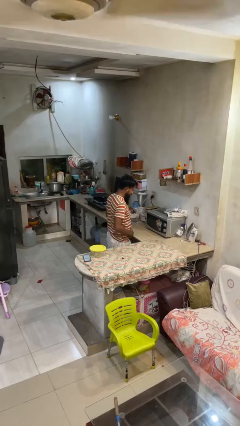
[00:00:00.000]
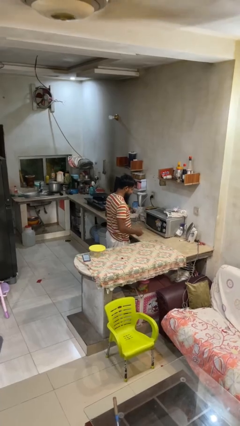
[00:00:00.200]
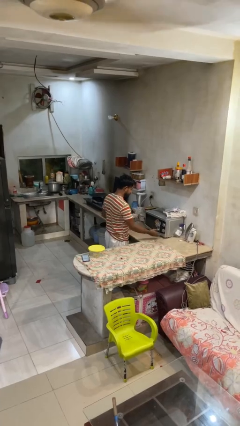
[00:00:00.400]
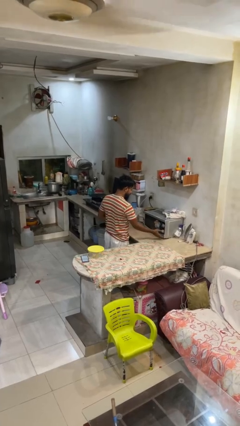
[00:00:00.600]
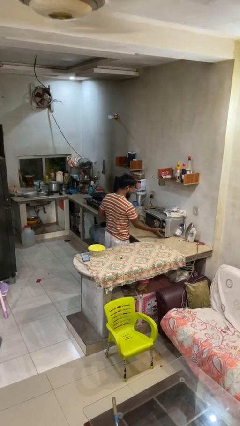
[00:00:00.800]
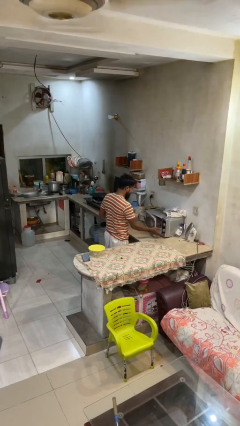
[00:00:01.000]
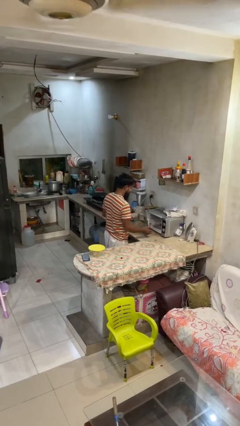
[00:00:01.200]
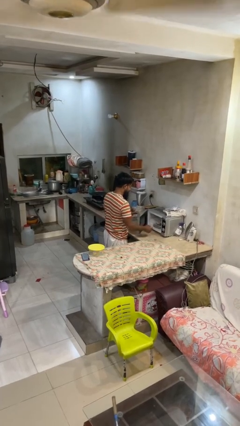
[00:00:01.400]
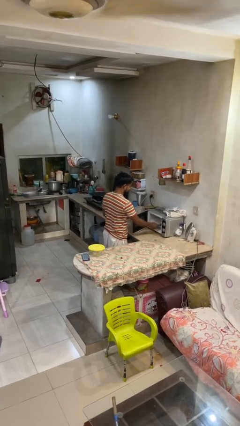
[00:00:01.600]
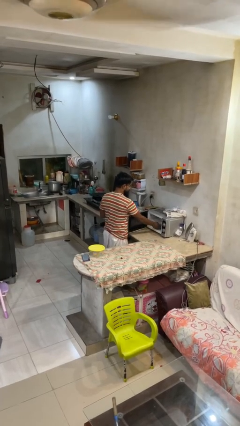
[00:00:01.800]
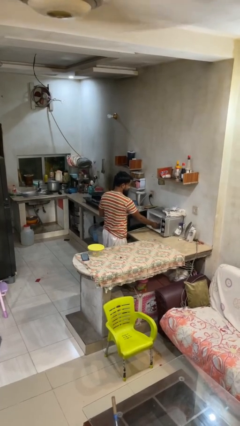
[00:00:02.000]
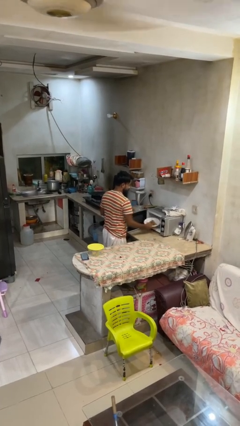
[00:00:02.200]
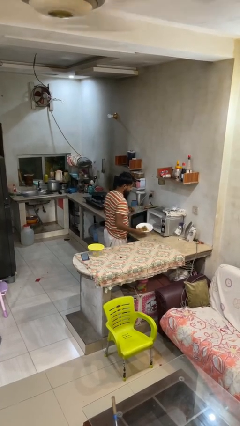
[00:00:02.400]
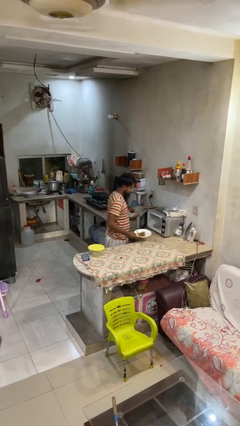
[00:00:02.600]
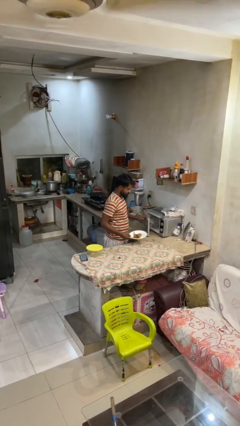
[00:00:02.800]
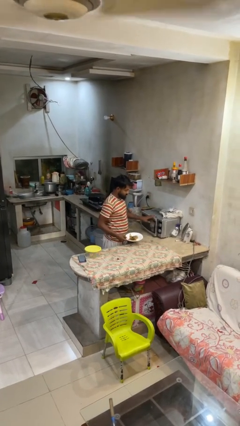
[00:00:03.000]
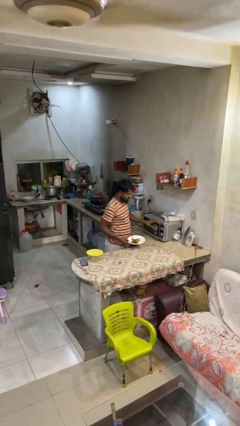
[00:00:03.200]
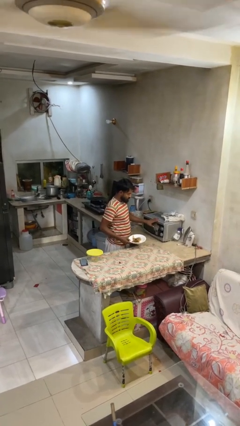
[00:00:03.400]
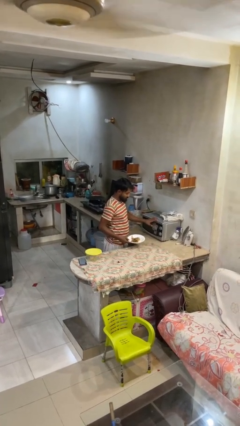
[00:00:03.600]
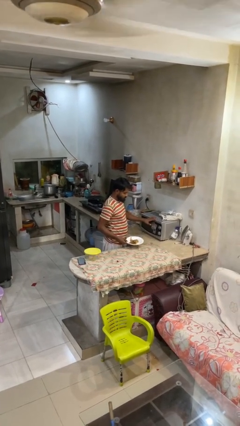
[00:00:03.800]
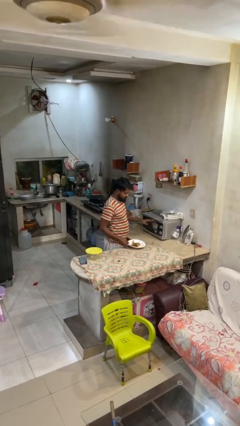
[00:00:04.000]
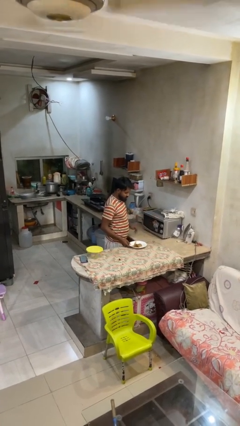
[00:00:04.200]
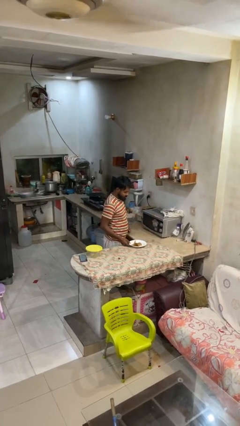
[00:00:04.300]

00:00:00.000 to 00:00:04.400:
person takes object from microwave

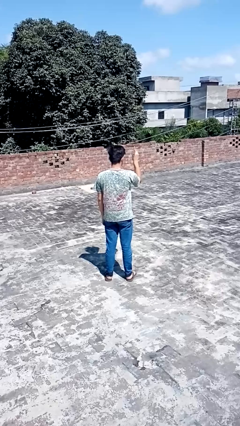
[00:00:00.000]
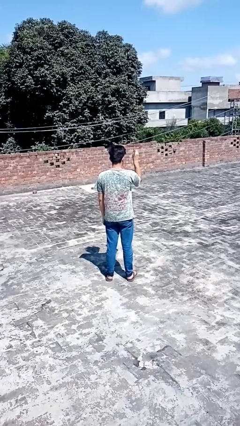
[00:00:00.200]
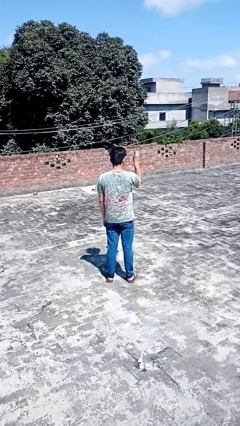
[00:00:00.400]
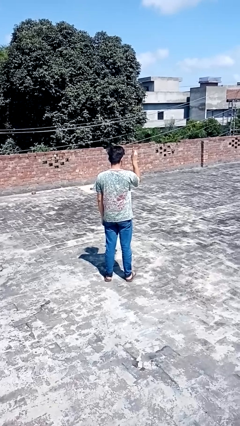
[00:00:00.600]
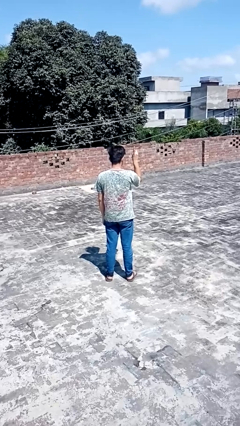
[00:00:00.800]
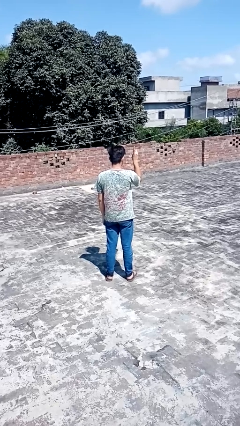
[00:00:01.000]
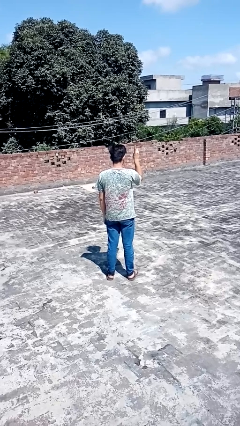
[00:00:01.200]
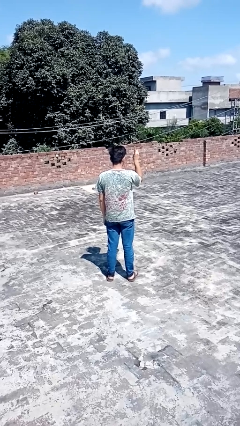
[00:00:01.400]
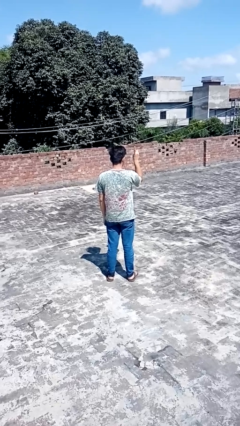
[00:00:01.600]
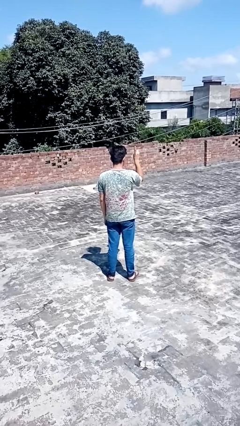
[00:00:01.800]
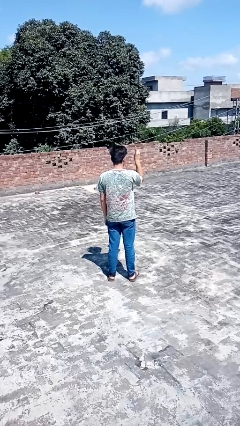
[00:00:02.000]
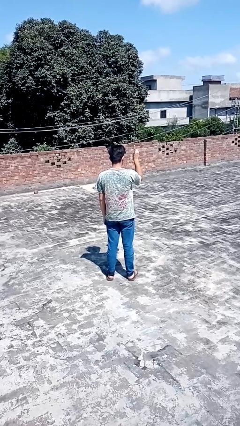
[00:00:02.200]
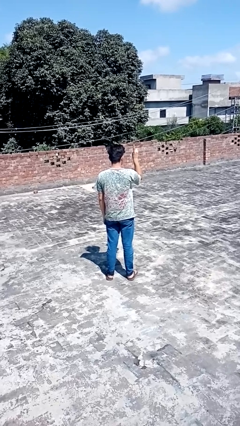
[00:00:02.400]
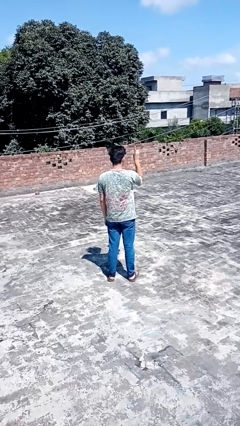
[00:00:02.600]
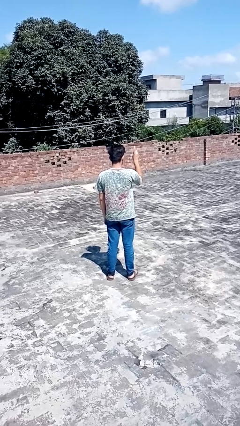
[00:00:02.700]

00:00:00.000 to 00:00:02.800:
person gestures number one

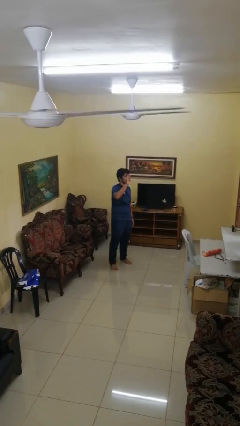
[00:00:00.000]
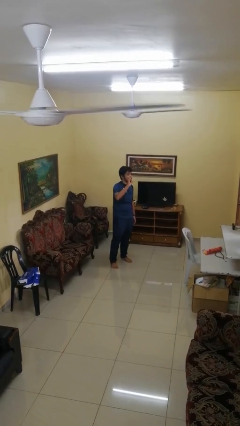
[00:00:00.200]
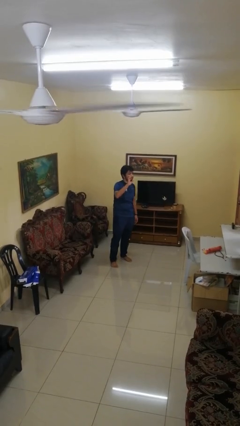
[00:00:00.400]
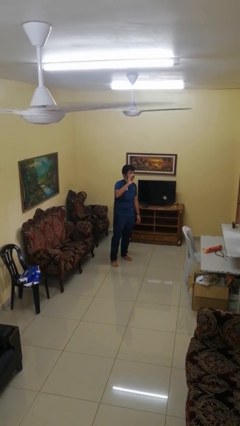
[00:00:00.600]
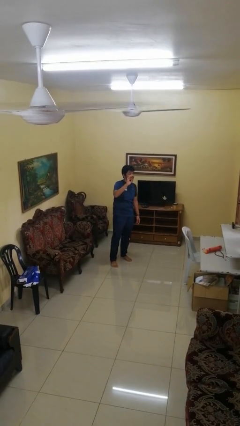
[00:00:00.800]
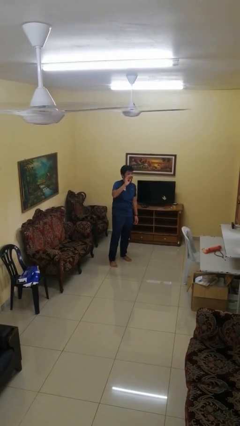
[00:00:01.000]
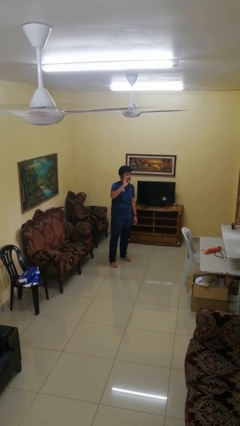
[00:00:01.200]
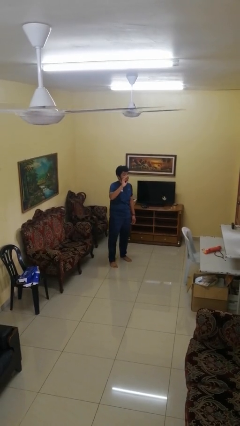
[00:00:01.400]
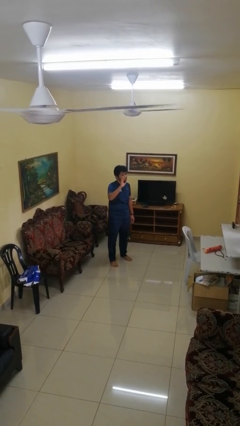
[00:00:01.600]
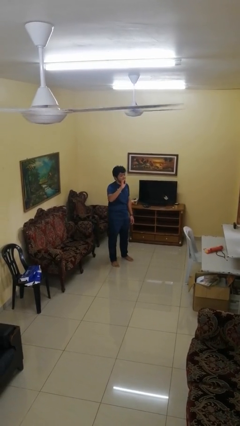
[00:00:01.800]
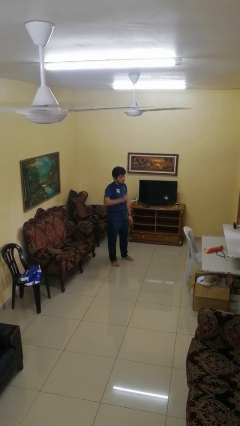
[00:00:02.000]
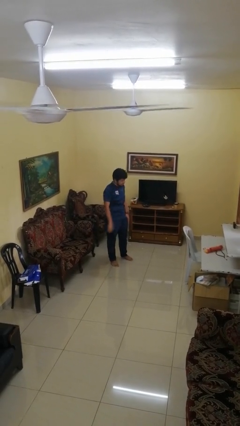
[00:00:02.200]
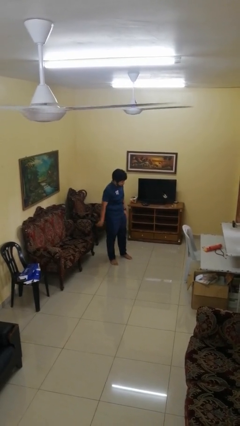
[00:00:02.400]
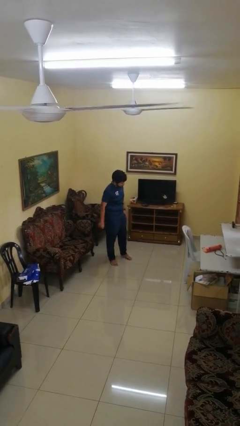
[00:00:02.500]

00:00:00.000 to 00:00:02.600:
person gestures lower hand

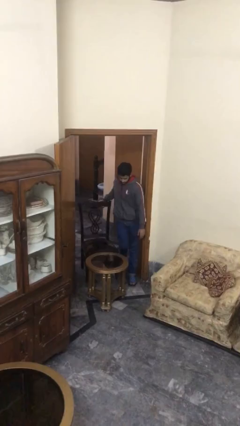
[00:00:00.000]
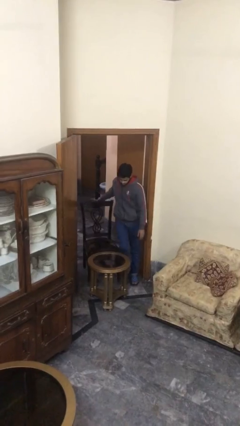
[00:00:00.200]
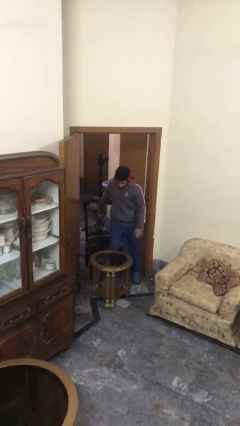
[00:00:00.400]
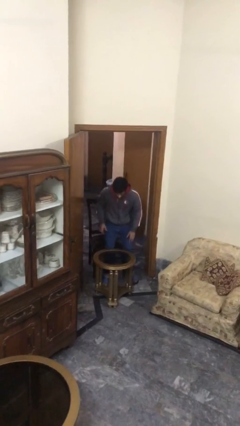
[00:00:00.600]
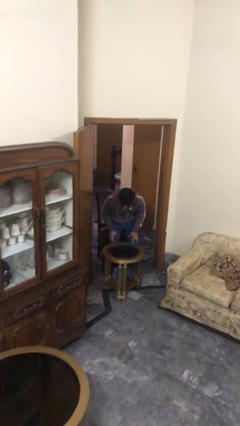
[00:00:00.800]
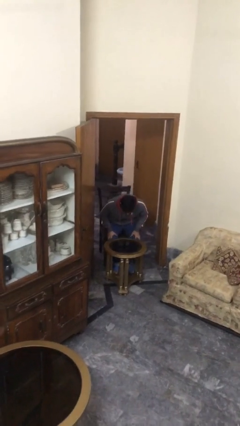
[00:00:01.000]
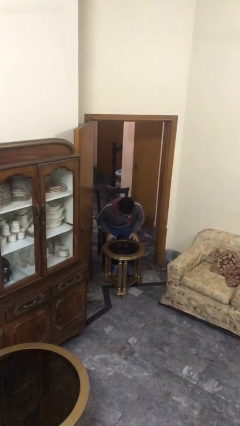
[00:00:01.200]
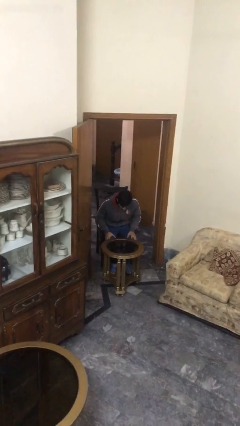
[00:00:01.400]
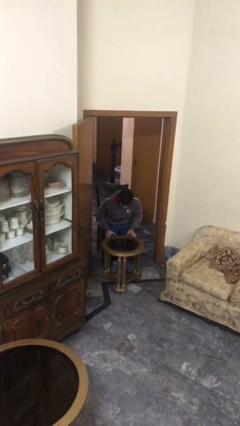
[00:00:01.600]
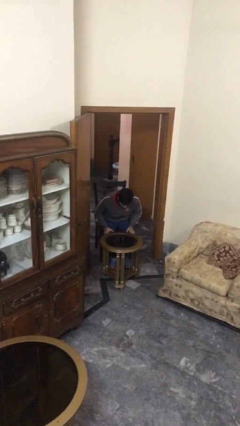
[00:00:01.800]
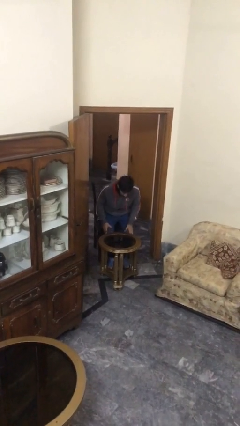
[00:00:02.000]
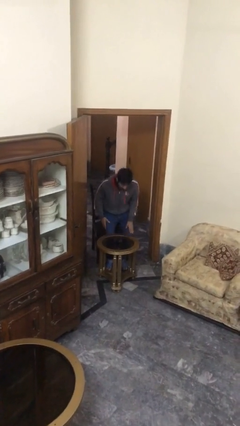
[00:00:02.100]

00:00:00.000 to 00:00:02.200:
person sits down

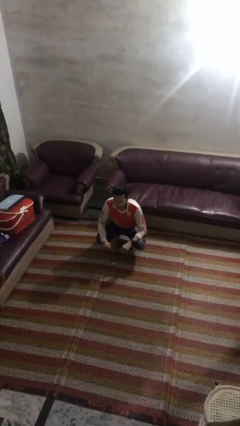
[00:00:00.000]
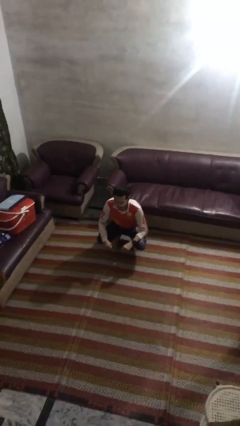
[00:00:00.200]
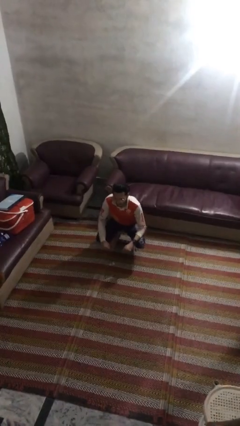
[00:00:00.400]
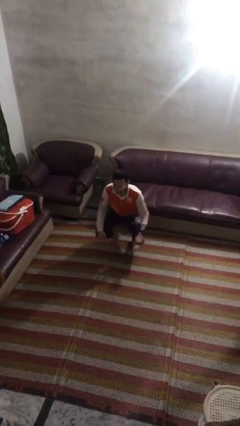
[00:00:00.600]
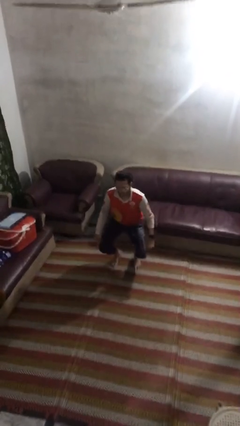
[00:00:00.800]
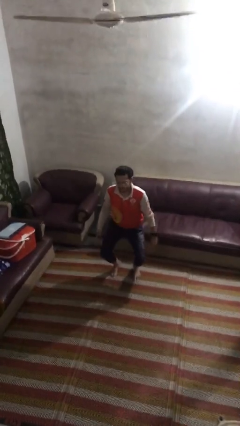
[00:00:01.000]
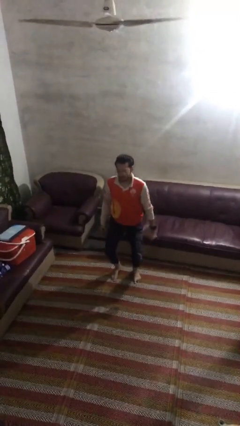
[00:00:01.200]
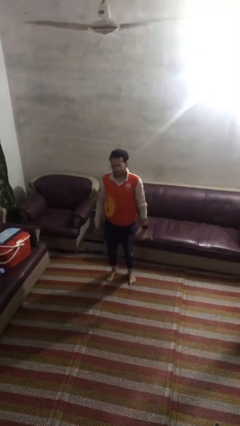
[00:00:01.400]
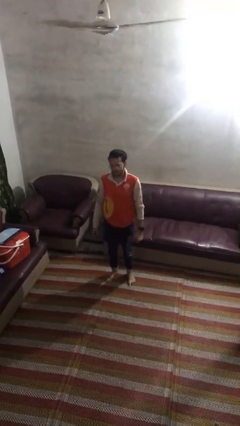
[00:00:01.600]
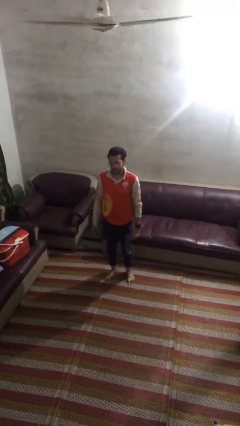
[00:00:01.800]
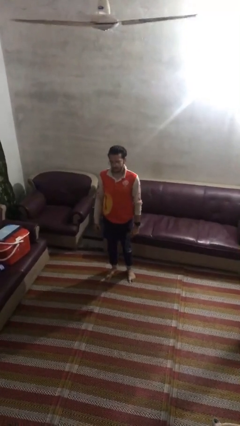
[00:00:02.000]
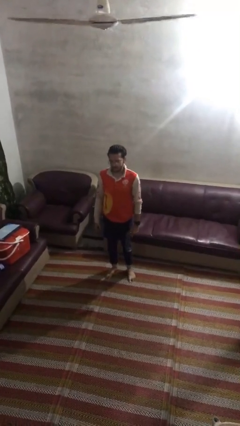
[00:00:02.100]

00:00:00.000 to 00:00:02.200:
person stands up

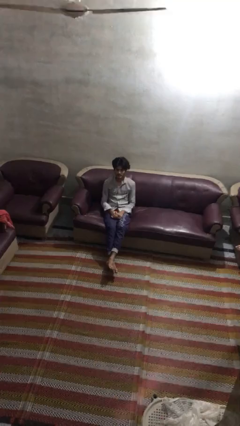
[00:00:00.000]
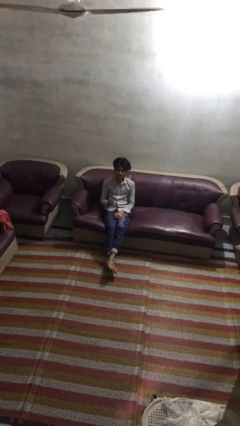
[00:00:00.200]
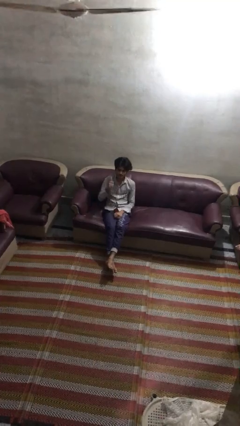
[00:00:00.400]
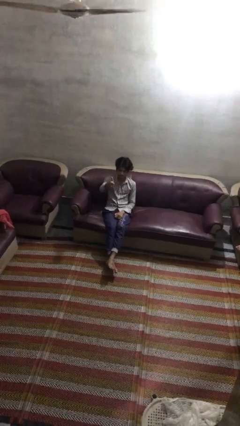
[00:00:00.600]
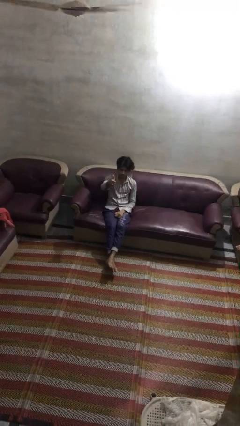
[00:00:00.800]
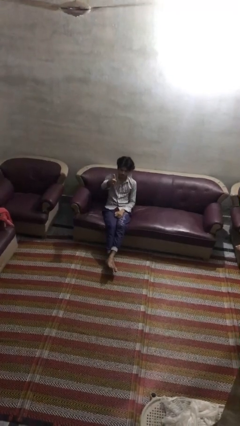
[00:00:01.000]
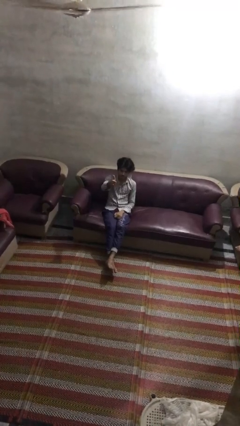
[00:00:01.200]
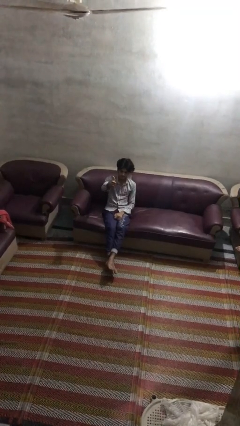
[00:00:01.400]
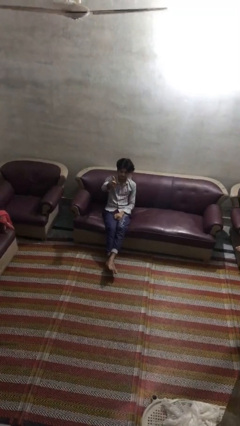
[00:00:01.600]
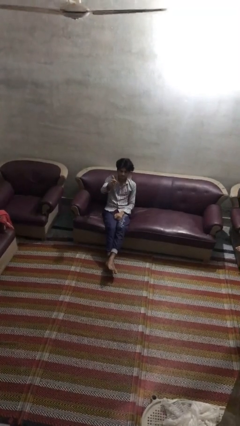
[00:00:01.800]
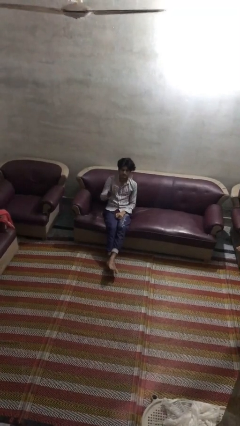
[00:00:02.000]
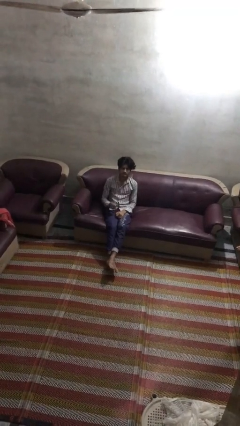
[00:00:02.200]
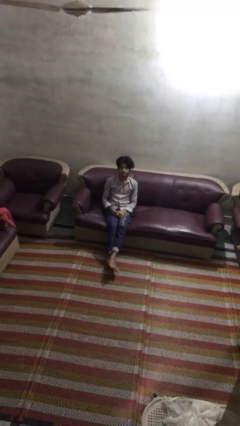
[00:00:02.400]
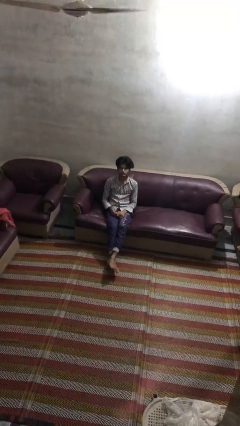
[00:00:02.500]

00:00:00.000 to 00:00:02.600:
person gestures thumbs up
